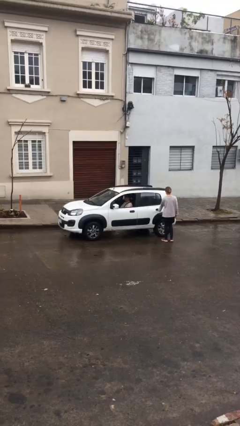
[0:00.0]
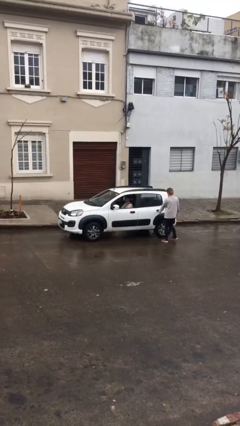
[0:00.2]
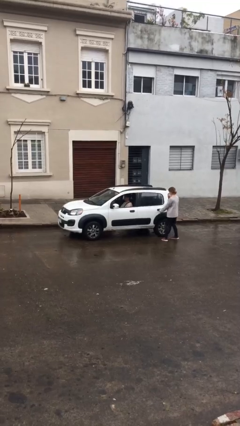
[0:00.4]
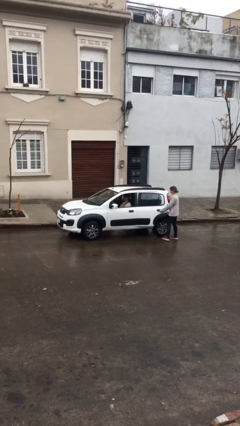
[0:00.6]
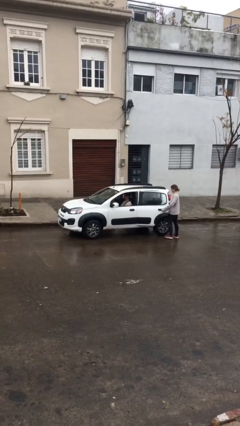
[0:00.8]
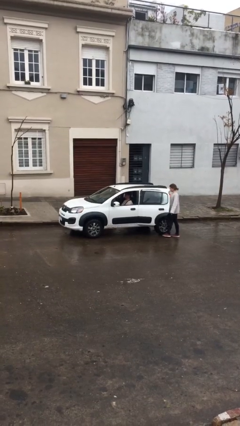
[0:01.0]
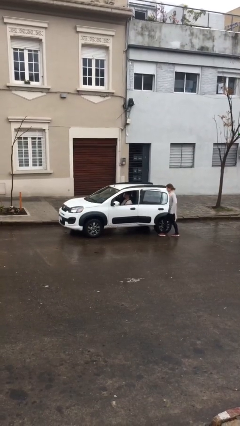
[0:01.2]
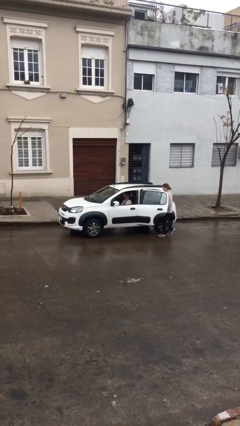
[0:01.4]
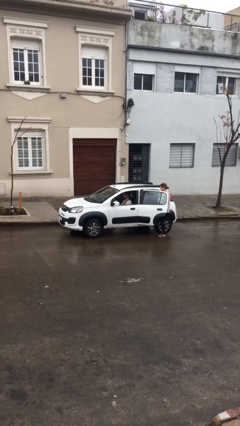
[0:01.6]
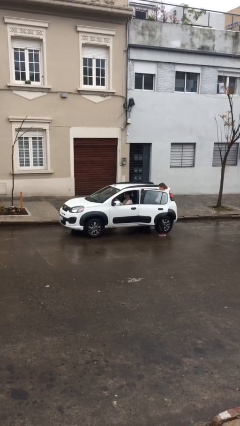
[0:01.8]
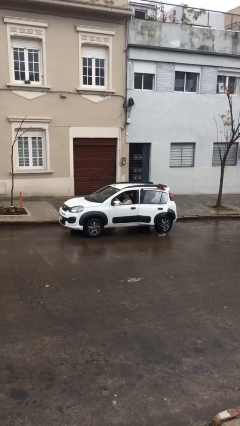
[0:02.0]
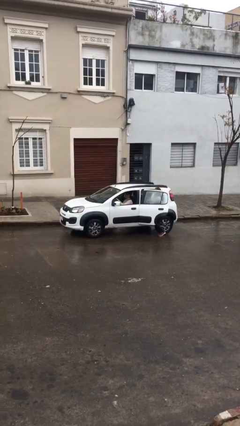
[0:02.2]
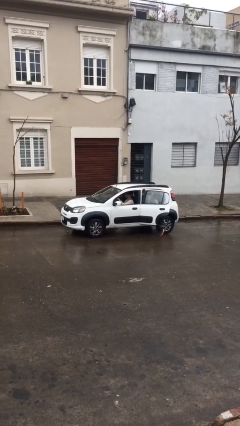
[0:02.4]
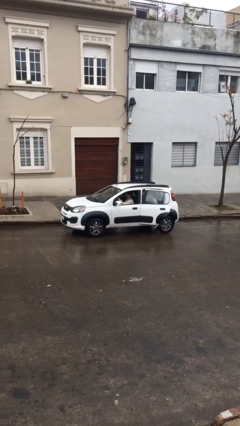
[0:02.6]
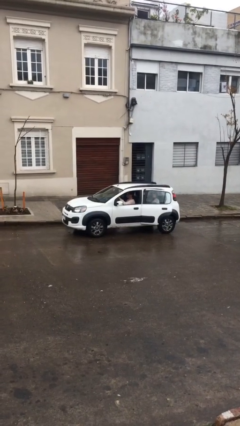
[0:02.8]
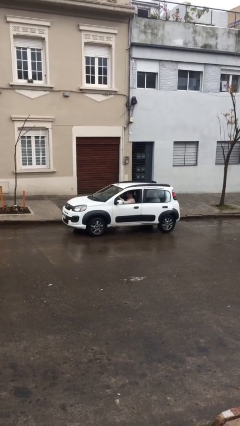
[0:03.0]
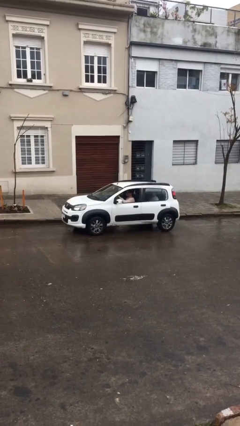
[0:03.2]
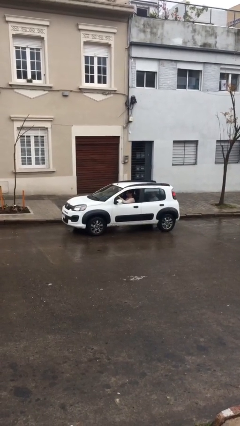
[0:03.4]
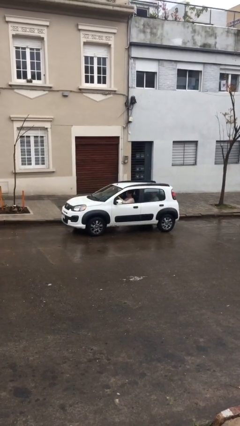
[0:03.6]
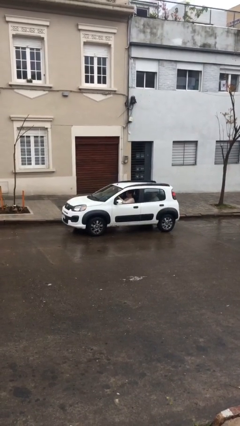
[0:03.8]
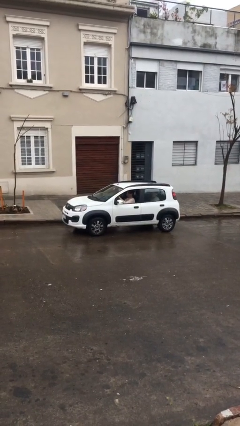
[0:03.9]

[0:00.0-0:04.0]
car picks up person

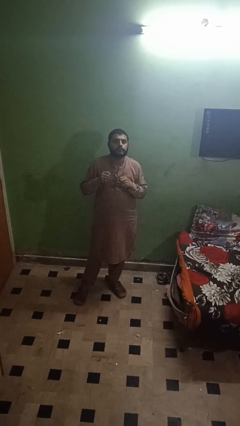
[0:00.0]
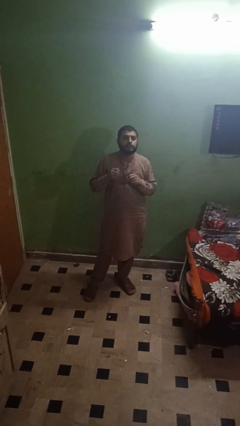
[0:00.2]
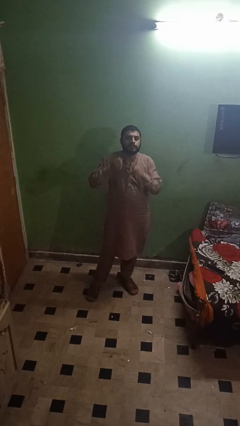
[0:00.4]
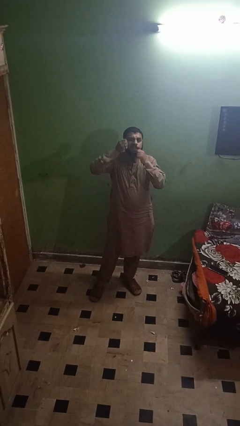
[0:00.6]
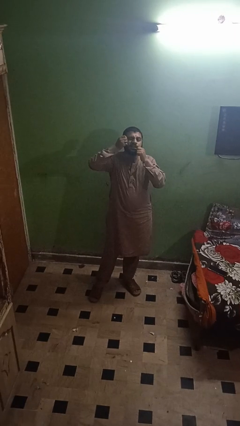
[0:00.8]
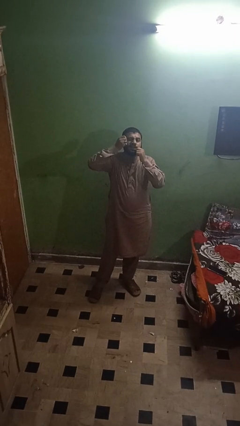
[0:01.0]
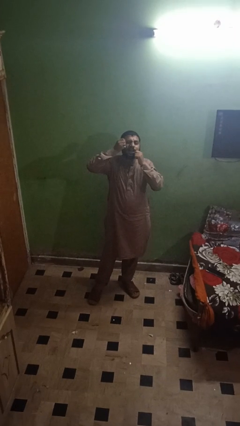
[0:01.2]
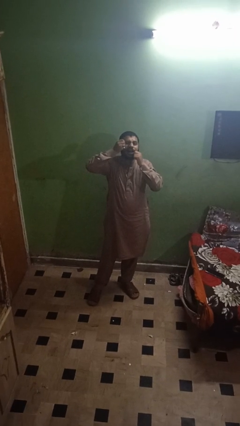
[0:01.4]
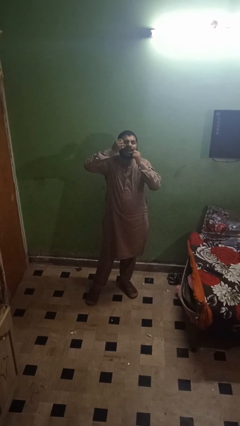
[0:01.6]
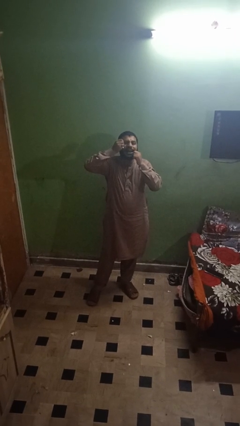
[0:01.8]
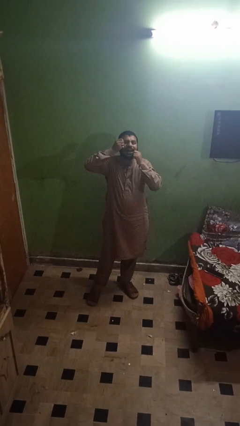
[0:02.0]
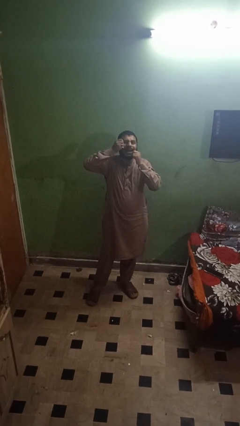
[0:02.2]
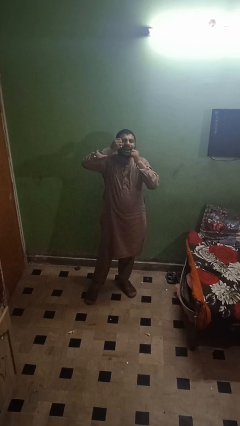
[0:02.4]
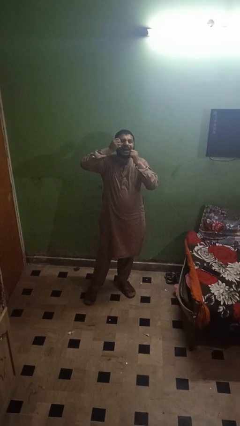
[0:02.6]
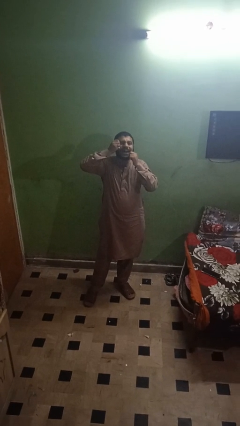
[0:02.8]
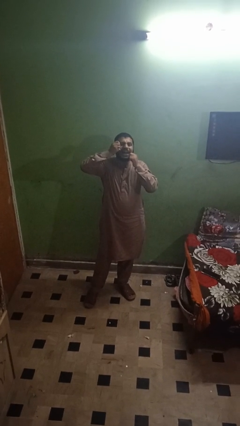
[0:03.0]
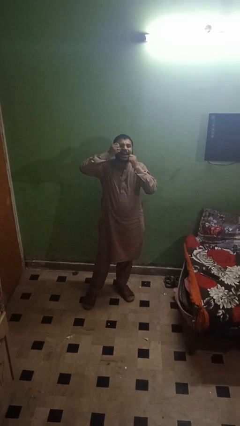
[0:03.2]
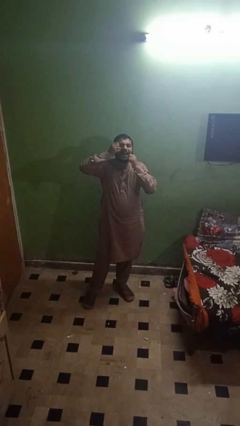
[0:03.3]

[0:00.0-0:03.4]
person flosses

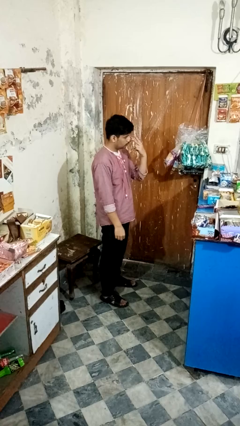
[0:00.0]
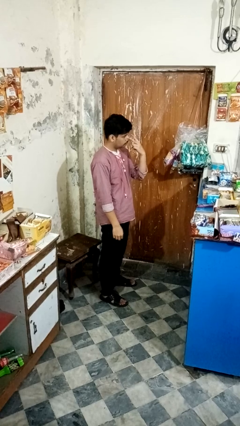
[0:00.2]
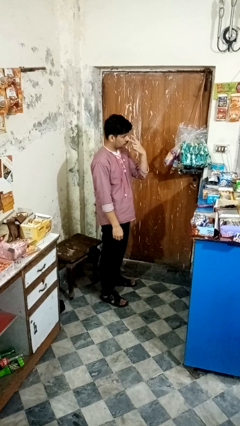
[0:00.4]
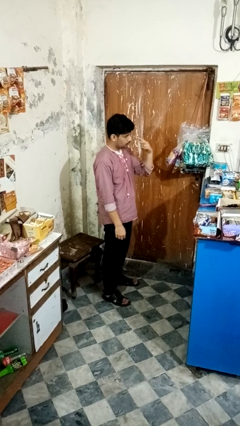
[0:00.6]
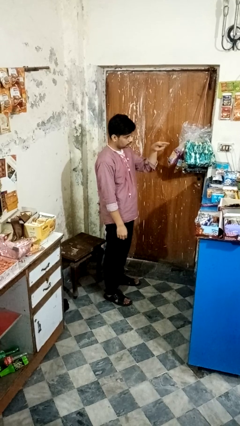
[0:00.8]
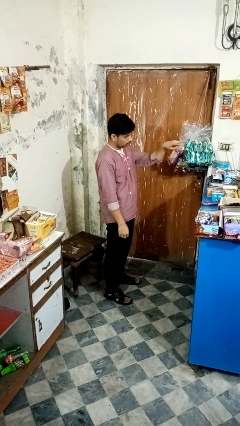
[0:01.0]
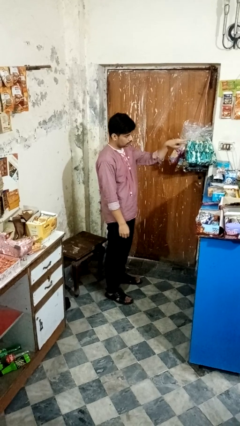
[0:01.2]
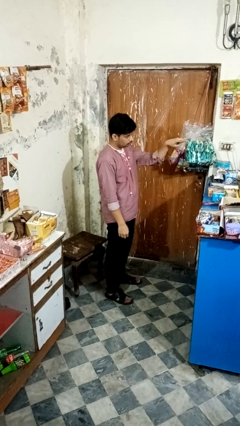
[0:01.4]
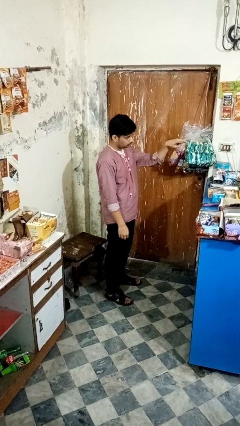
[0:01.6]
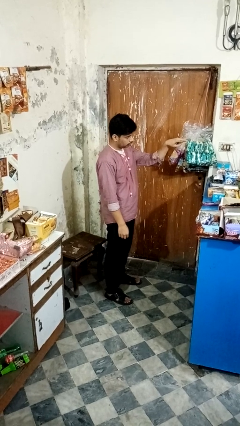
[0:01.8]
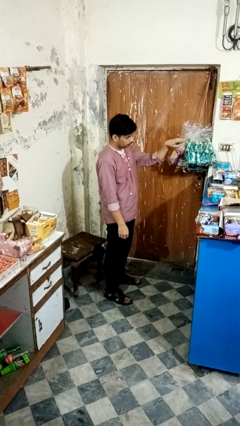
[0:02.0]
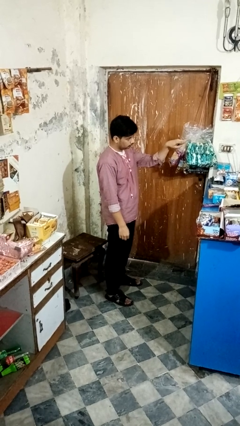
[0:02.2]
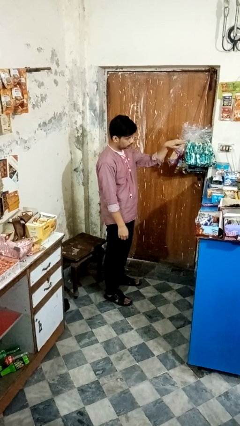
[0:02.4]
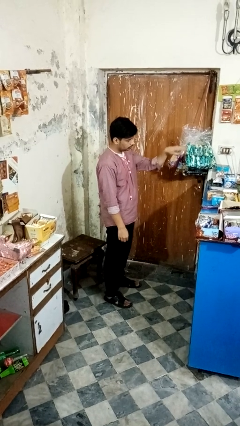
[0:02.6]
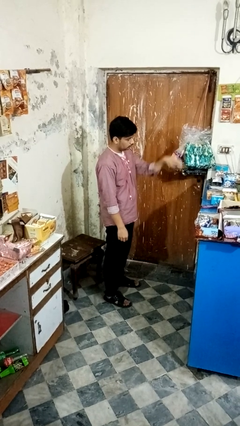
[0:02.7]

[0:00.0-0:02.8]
person gestures watch closely

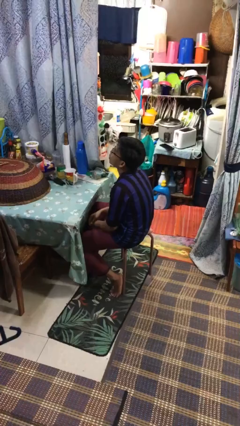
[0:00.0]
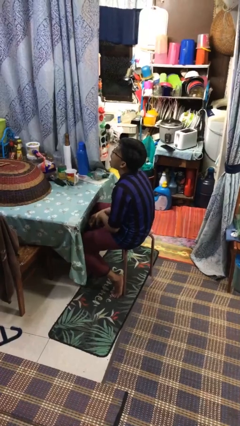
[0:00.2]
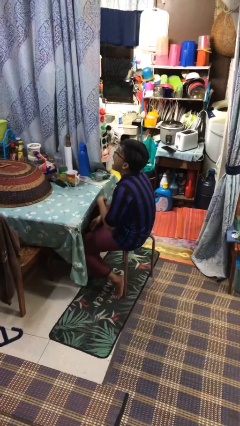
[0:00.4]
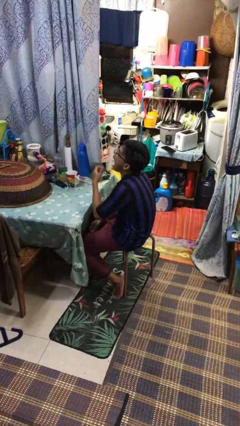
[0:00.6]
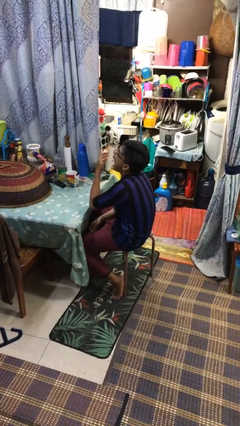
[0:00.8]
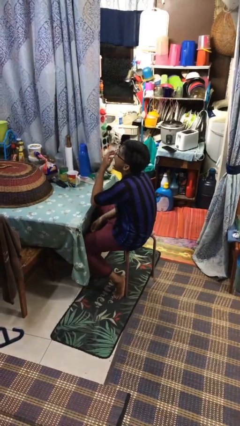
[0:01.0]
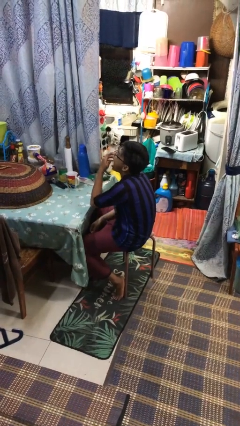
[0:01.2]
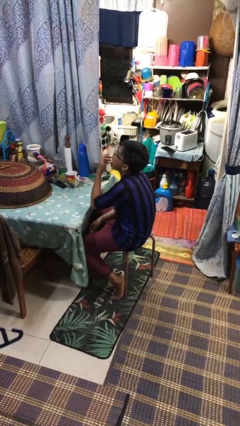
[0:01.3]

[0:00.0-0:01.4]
person yawns

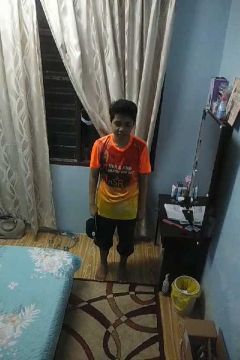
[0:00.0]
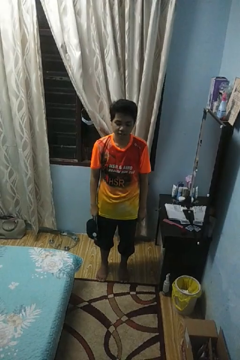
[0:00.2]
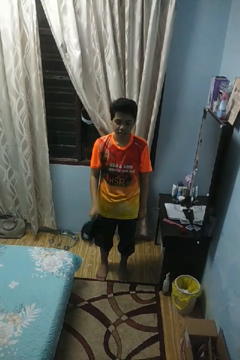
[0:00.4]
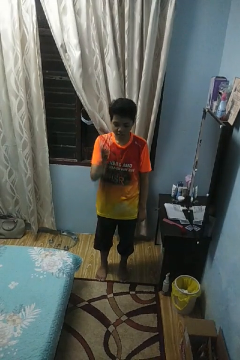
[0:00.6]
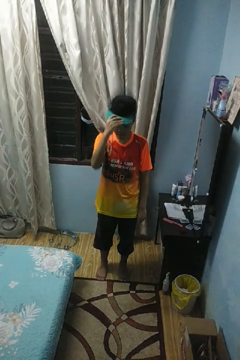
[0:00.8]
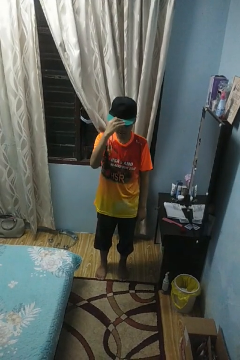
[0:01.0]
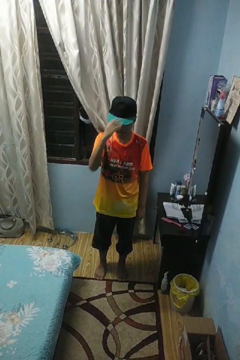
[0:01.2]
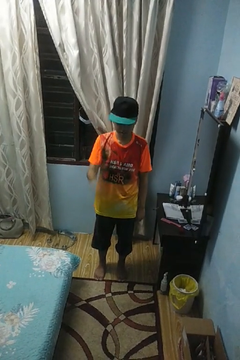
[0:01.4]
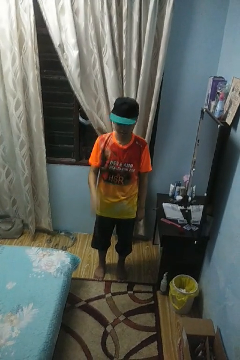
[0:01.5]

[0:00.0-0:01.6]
person puts on hat

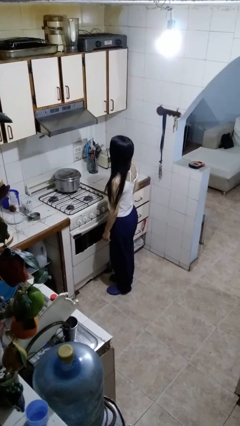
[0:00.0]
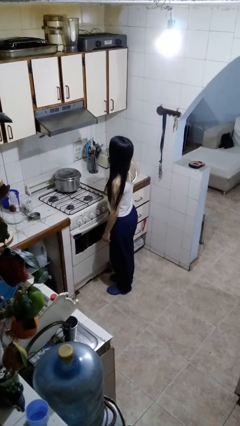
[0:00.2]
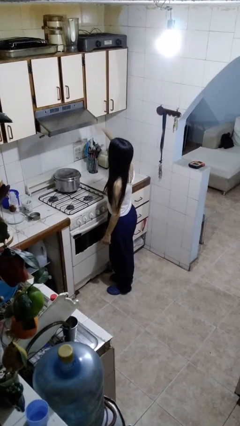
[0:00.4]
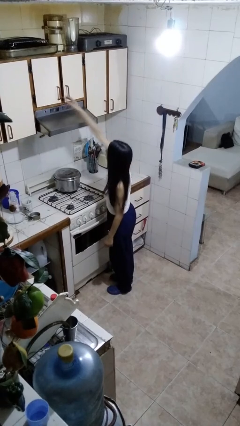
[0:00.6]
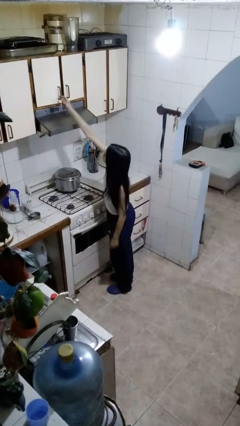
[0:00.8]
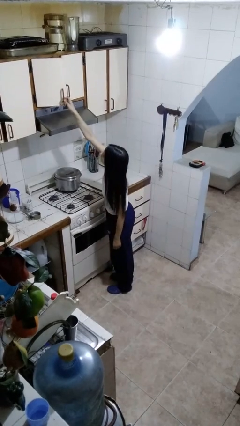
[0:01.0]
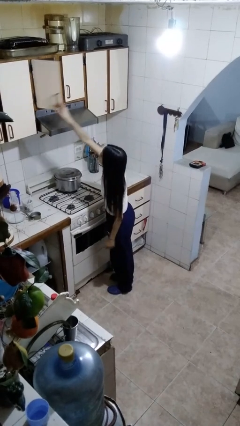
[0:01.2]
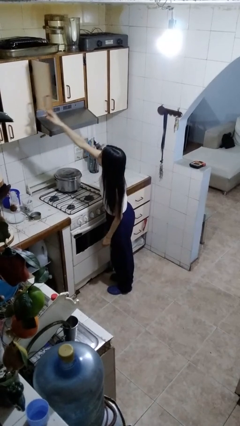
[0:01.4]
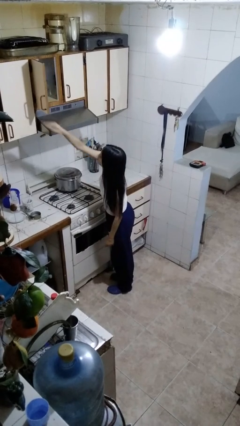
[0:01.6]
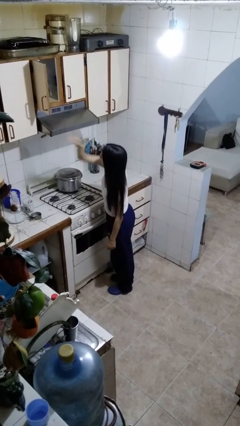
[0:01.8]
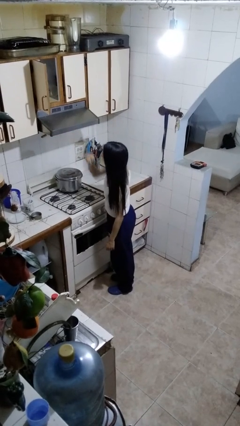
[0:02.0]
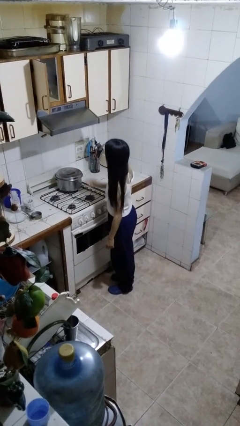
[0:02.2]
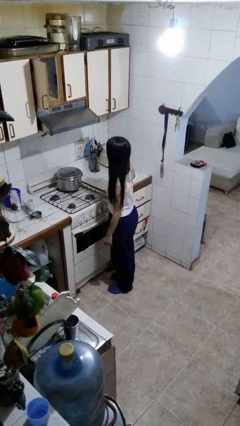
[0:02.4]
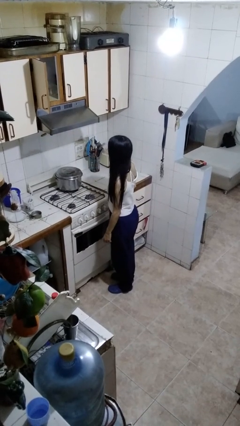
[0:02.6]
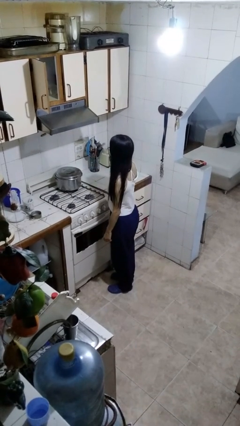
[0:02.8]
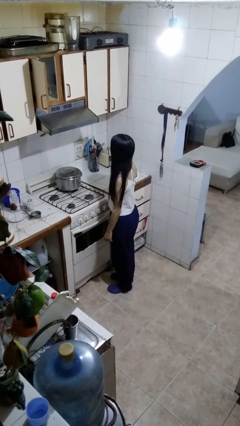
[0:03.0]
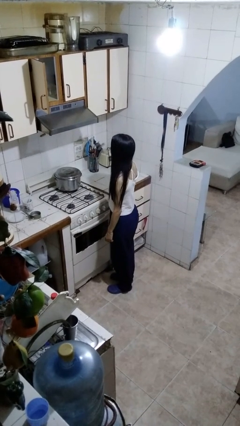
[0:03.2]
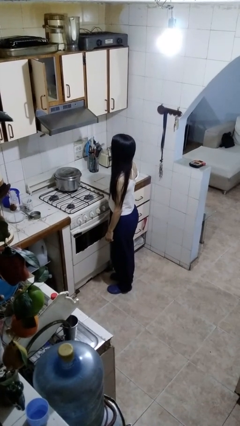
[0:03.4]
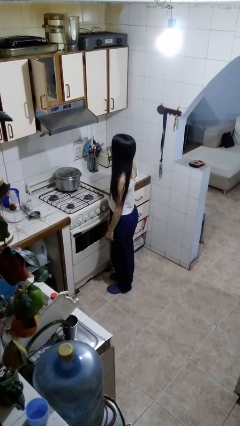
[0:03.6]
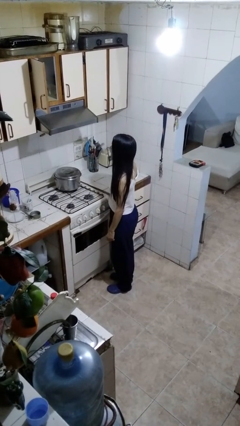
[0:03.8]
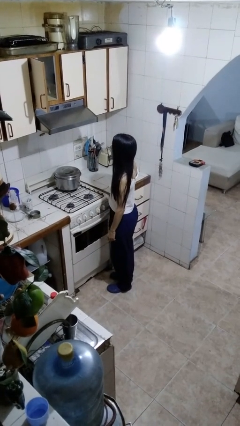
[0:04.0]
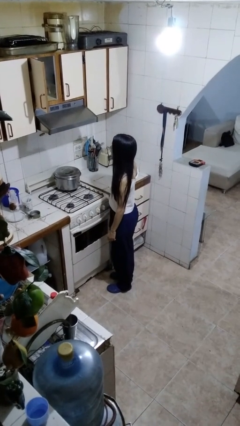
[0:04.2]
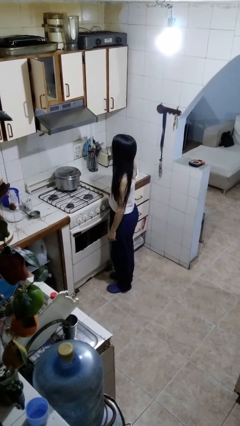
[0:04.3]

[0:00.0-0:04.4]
person opens cabinet

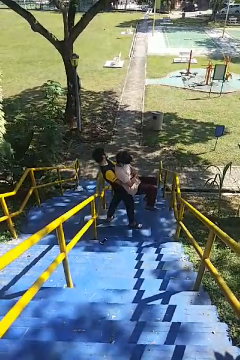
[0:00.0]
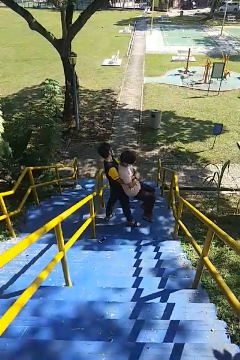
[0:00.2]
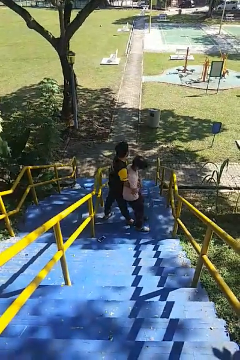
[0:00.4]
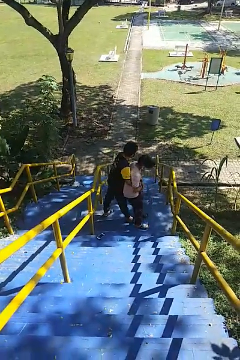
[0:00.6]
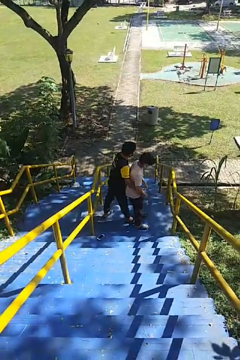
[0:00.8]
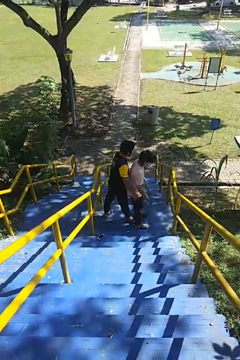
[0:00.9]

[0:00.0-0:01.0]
person puts down person
